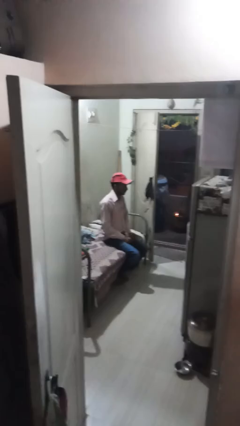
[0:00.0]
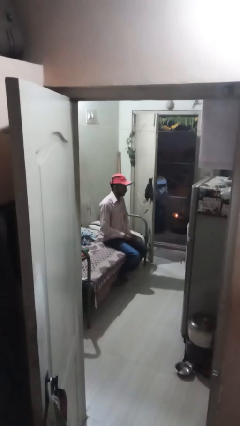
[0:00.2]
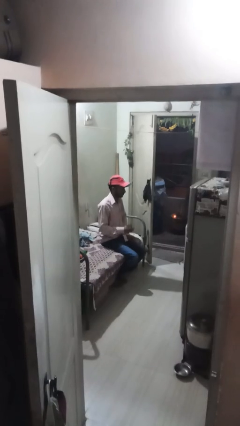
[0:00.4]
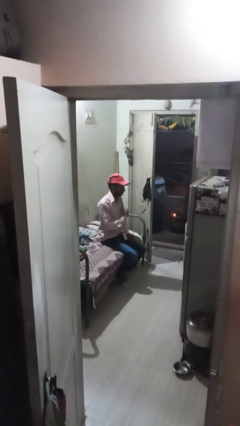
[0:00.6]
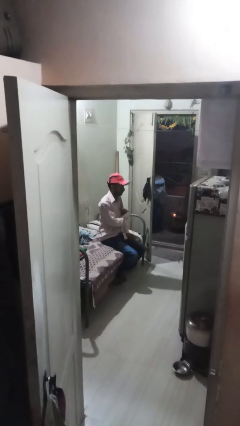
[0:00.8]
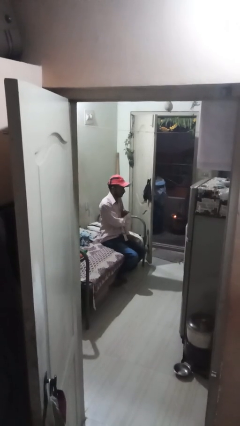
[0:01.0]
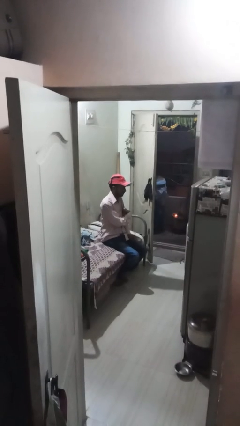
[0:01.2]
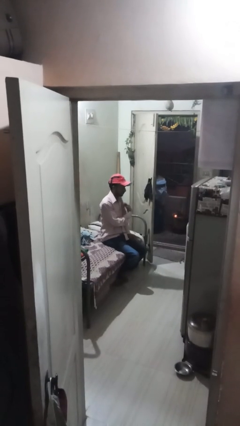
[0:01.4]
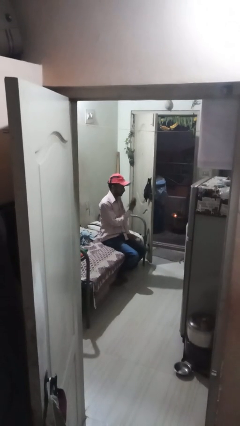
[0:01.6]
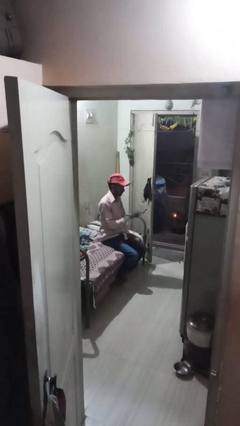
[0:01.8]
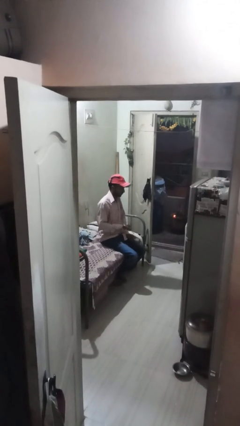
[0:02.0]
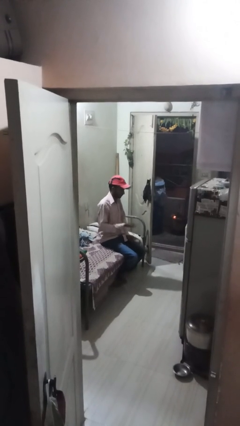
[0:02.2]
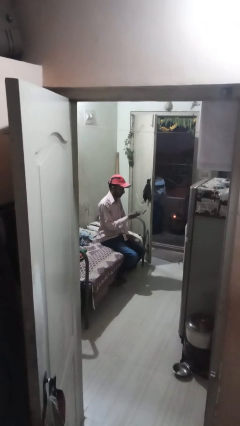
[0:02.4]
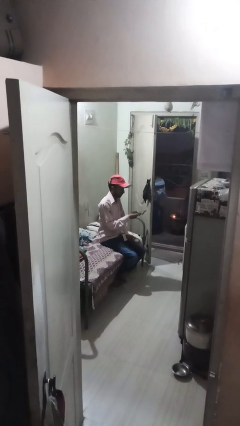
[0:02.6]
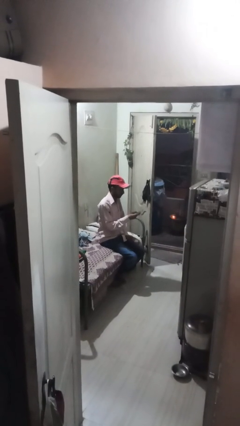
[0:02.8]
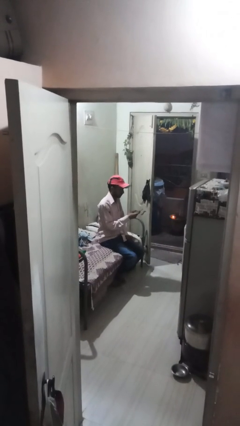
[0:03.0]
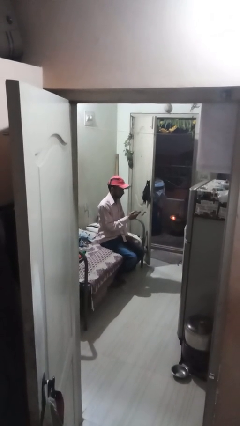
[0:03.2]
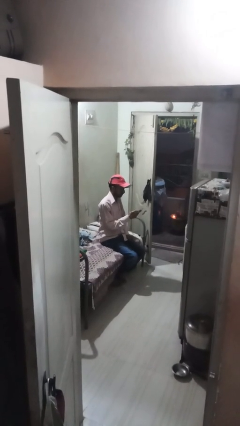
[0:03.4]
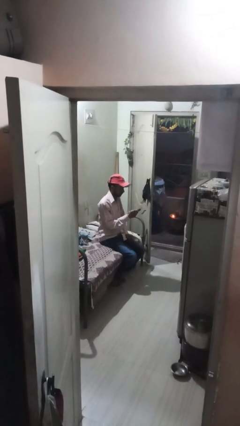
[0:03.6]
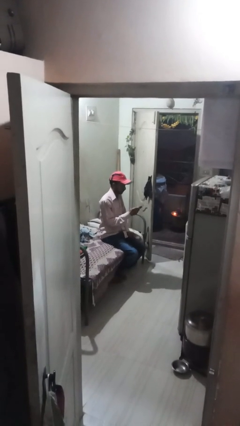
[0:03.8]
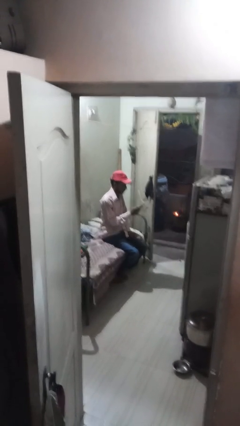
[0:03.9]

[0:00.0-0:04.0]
person takes phone from pocket

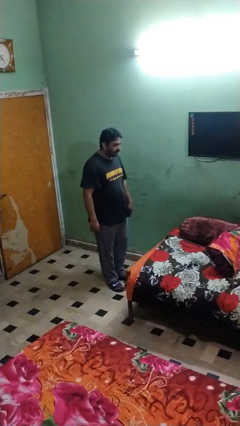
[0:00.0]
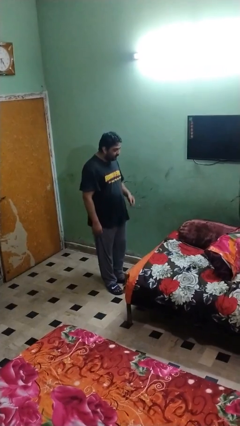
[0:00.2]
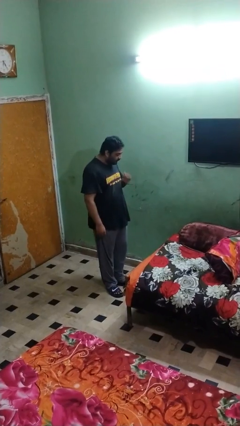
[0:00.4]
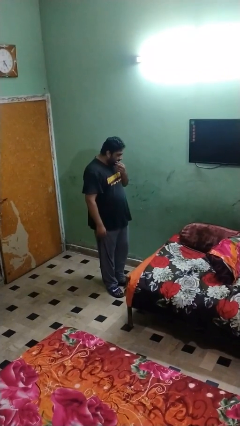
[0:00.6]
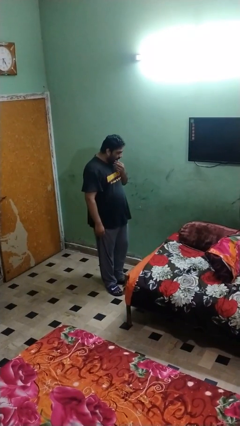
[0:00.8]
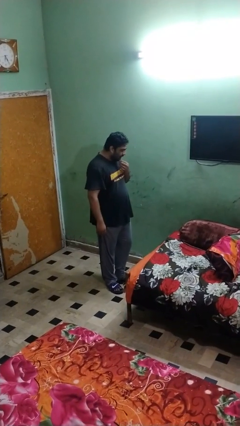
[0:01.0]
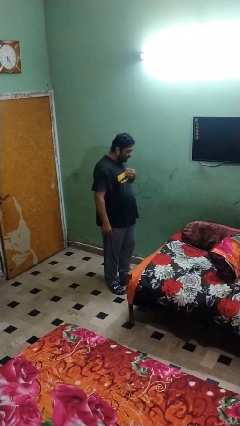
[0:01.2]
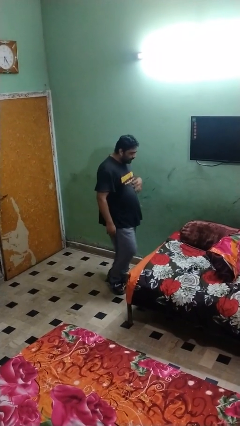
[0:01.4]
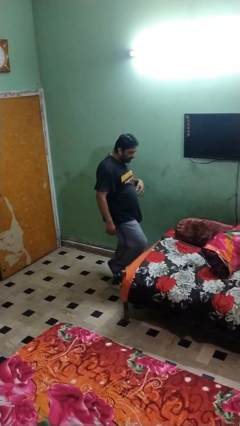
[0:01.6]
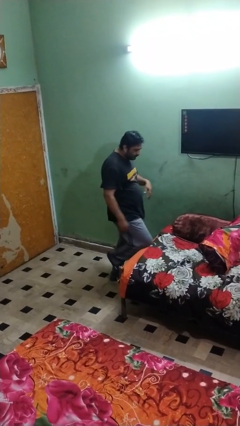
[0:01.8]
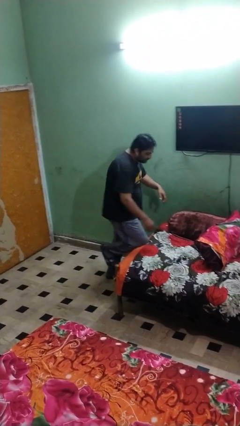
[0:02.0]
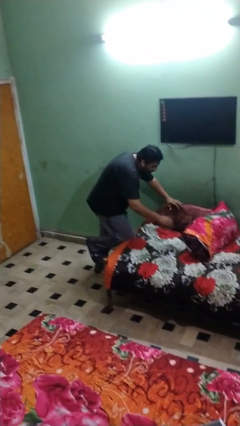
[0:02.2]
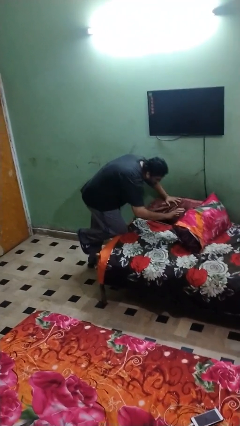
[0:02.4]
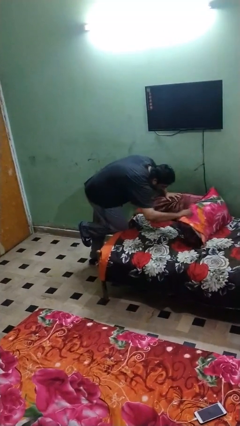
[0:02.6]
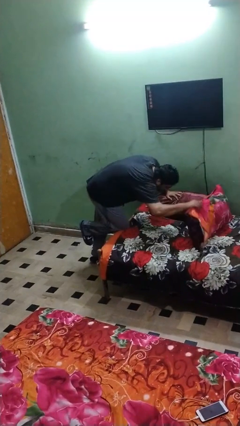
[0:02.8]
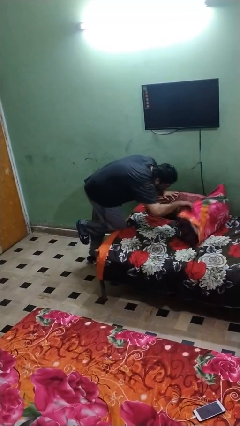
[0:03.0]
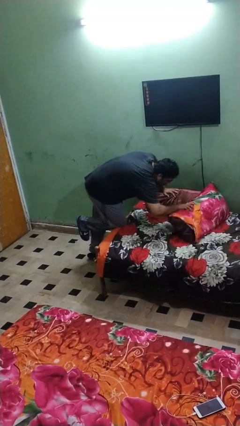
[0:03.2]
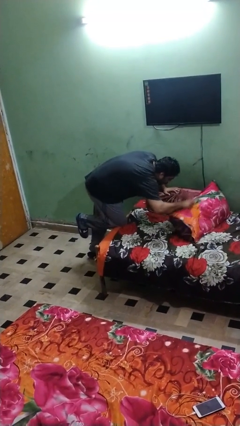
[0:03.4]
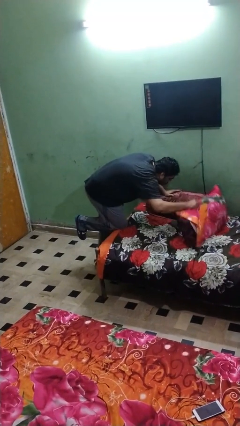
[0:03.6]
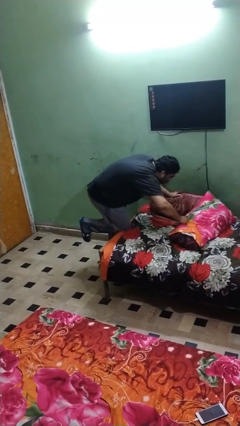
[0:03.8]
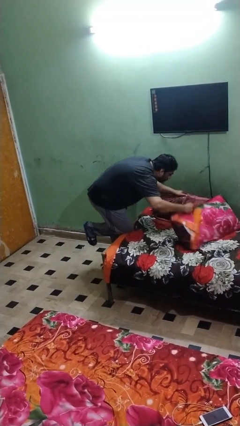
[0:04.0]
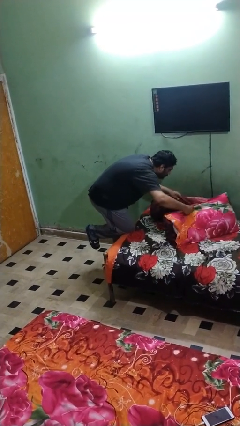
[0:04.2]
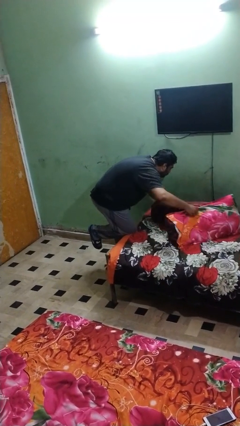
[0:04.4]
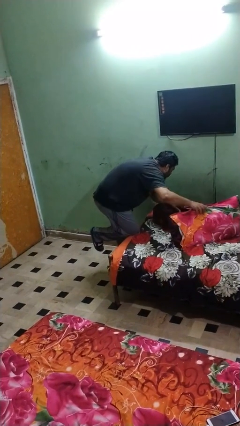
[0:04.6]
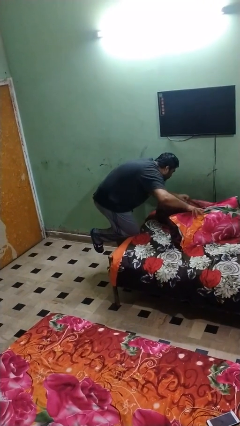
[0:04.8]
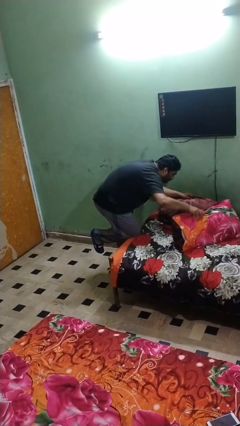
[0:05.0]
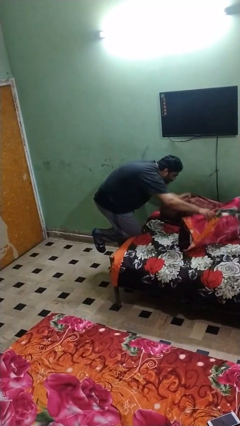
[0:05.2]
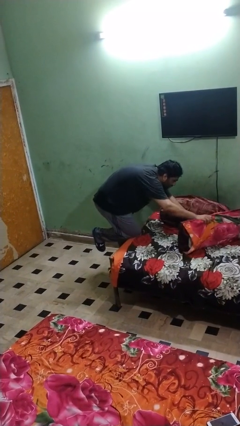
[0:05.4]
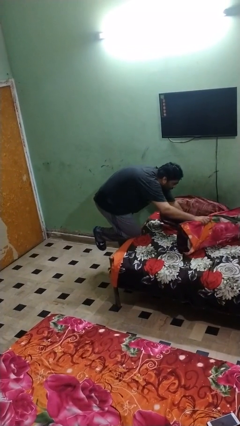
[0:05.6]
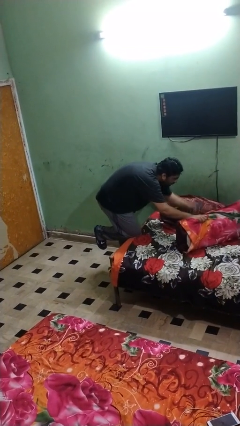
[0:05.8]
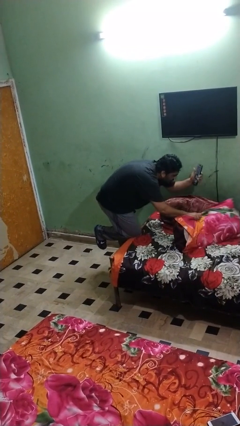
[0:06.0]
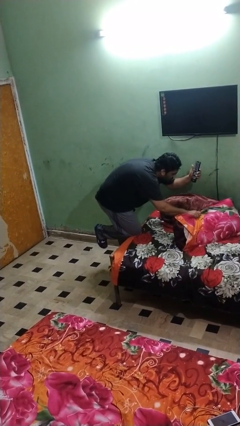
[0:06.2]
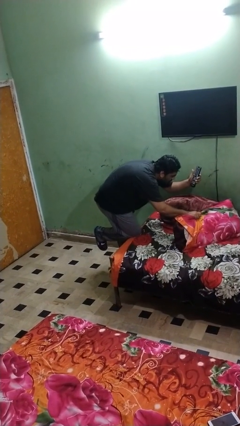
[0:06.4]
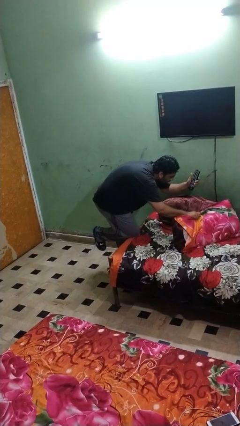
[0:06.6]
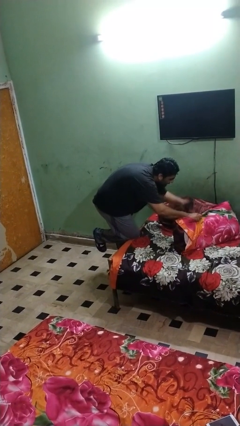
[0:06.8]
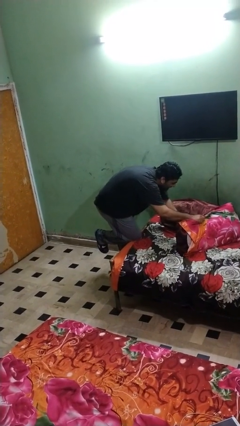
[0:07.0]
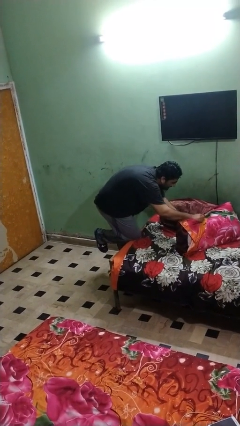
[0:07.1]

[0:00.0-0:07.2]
person searches in couch

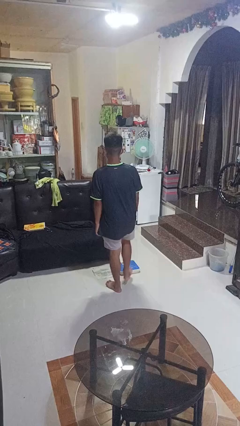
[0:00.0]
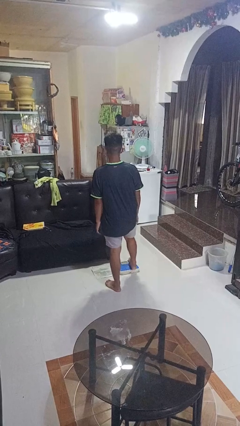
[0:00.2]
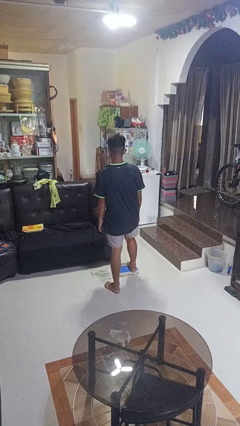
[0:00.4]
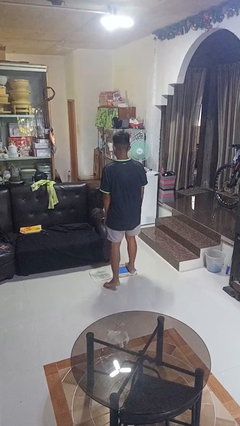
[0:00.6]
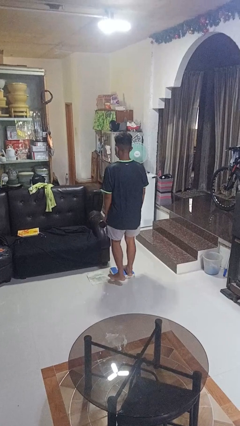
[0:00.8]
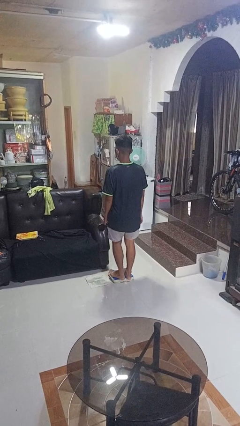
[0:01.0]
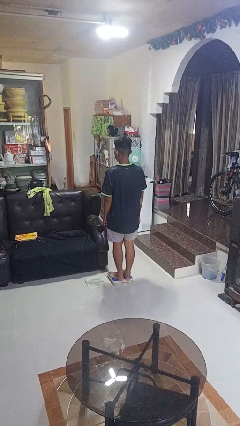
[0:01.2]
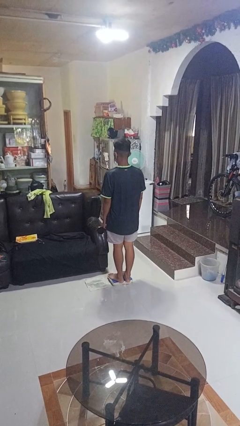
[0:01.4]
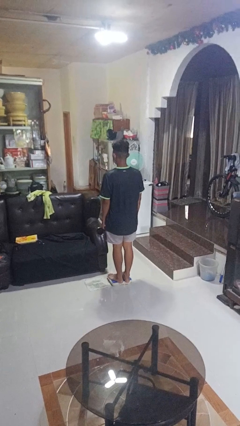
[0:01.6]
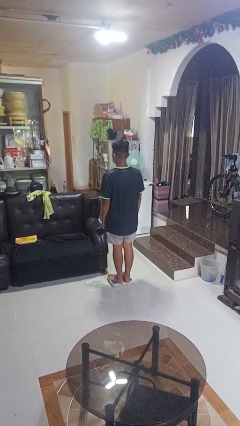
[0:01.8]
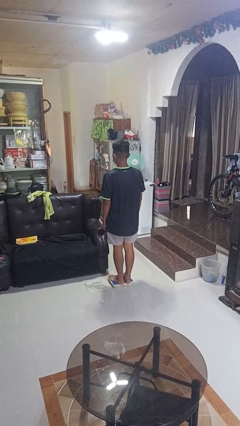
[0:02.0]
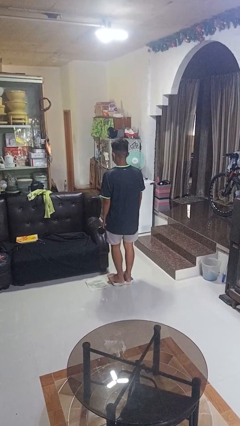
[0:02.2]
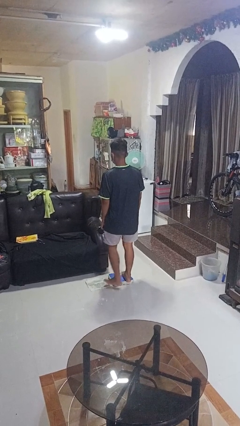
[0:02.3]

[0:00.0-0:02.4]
person uses bodyweight scale

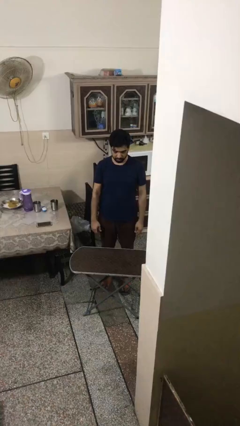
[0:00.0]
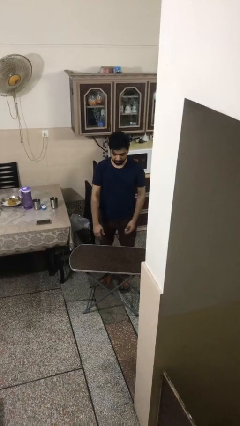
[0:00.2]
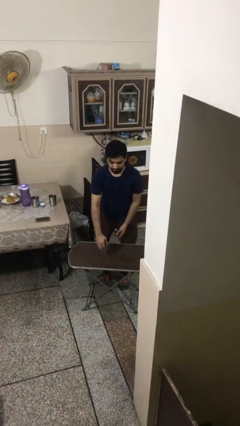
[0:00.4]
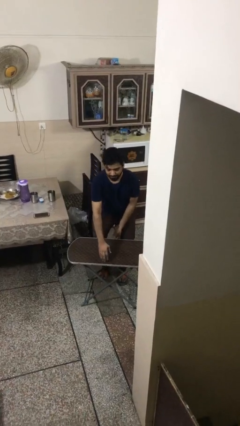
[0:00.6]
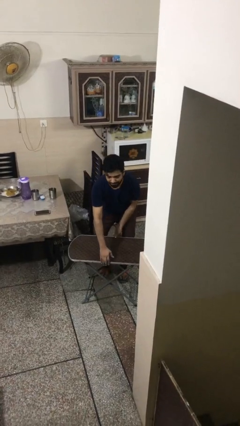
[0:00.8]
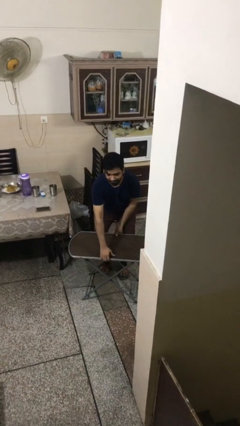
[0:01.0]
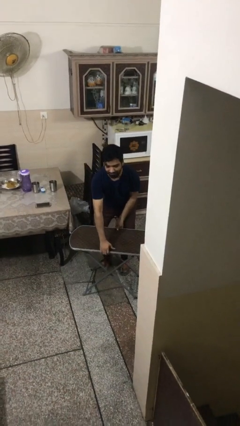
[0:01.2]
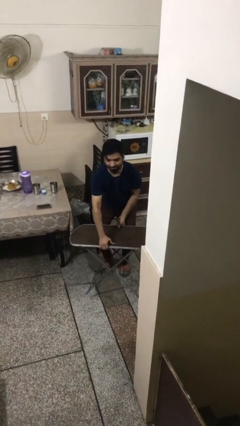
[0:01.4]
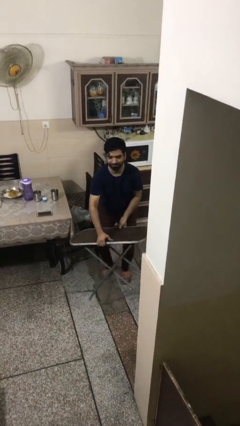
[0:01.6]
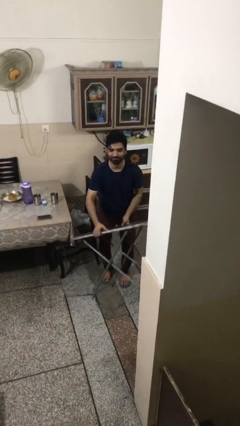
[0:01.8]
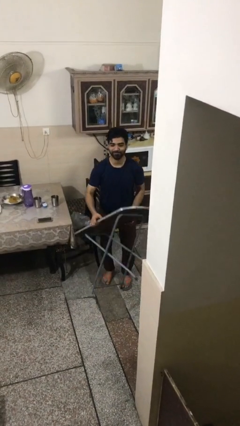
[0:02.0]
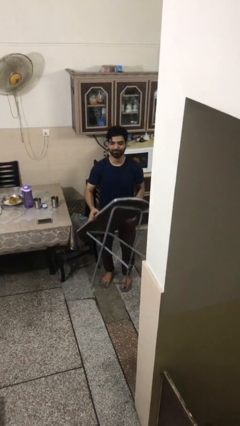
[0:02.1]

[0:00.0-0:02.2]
person picks up object from floor

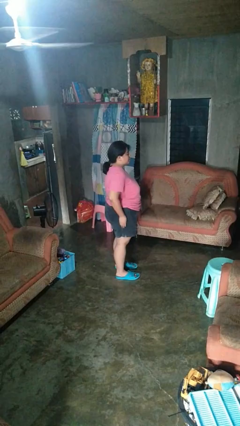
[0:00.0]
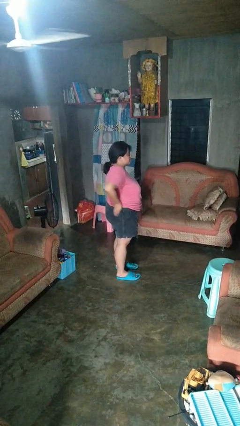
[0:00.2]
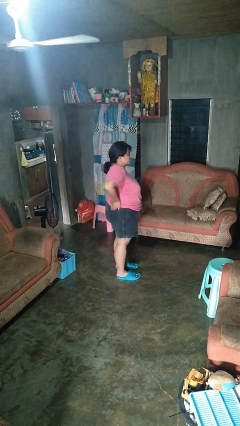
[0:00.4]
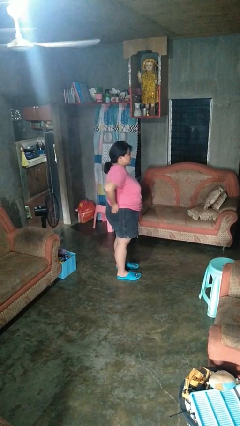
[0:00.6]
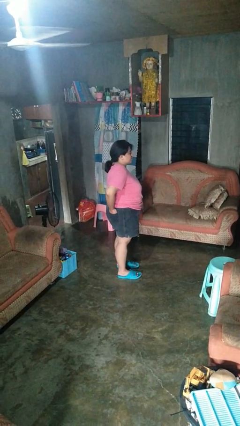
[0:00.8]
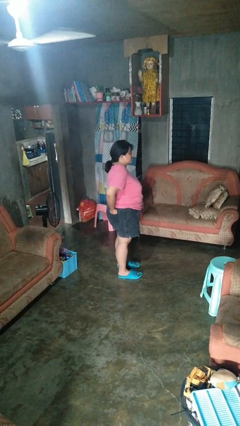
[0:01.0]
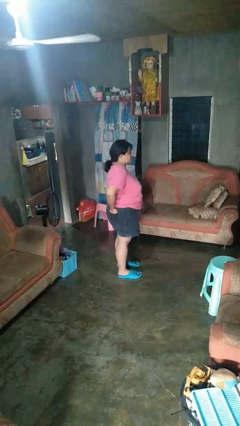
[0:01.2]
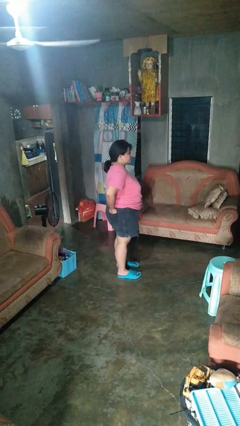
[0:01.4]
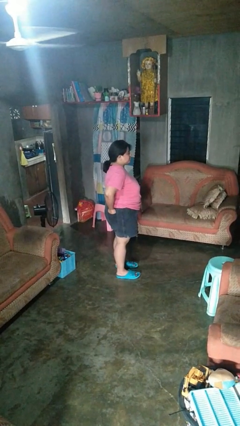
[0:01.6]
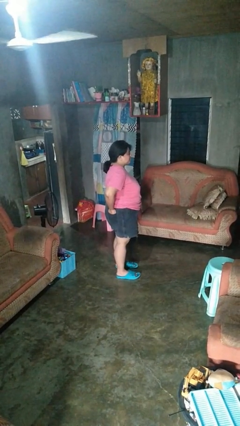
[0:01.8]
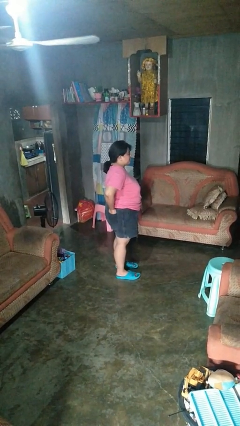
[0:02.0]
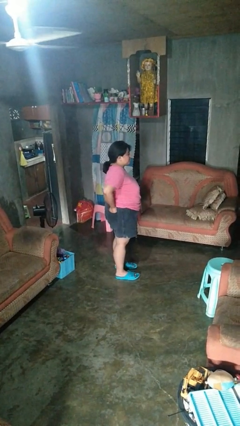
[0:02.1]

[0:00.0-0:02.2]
person puts hands in back pockets
